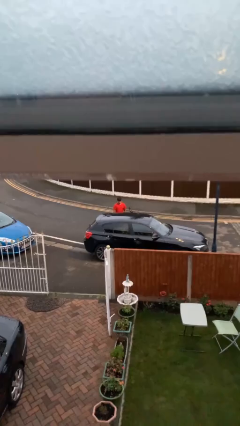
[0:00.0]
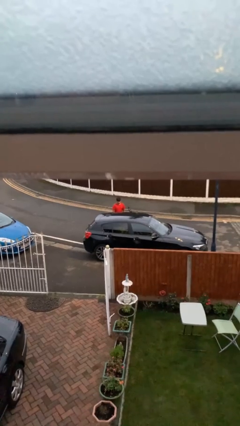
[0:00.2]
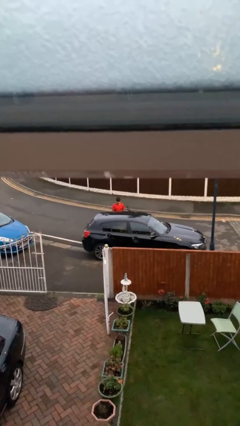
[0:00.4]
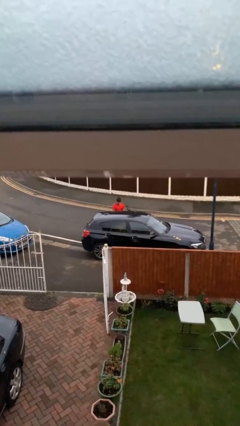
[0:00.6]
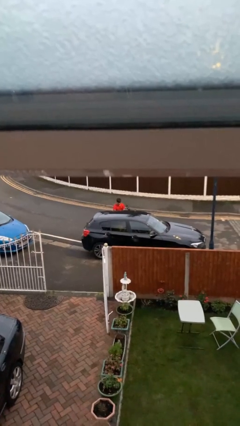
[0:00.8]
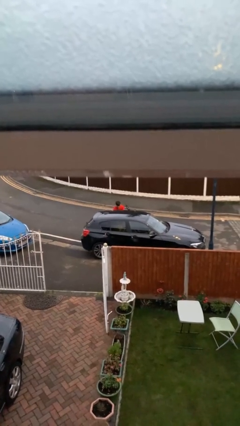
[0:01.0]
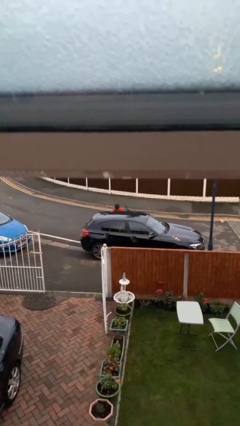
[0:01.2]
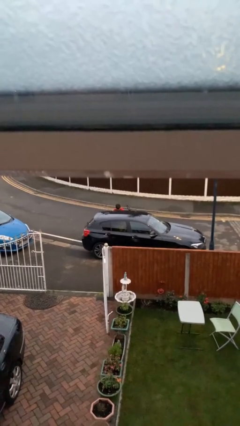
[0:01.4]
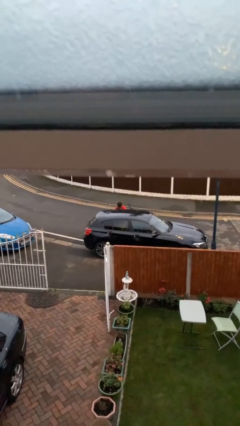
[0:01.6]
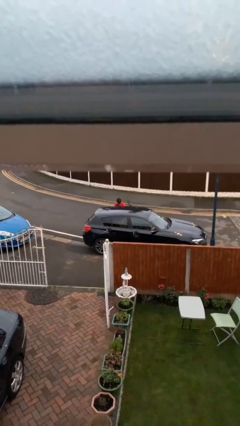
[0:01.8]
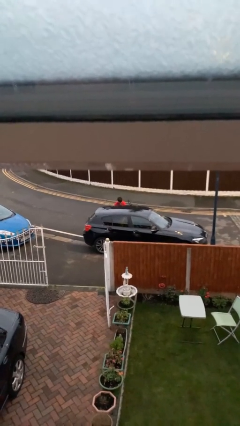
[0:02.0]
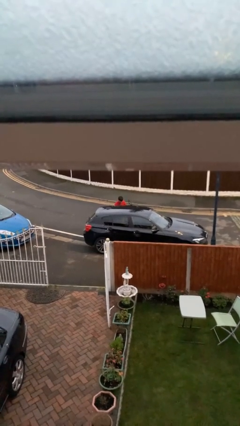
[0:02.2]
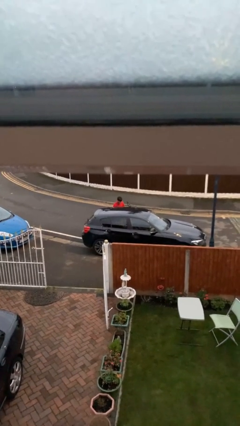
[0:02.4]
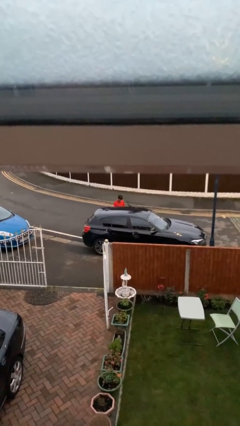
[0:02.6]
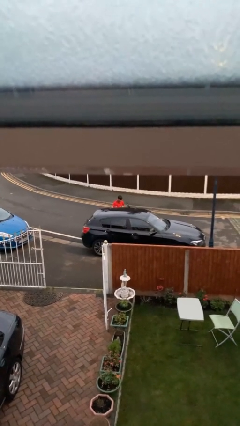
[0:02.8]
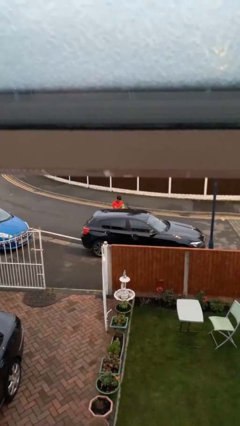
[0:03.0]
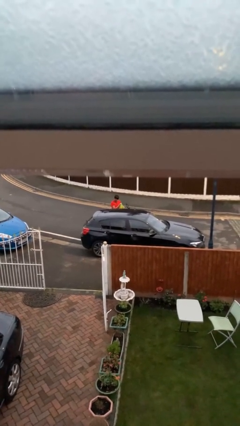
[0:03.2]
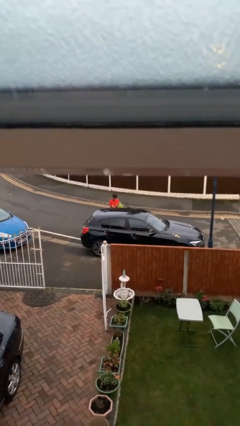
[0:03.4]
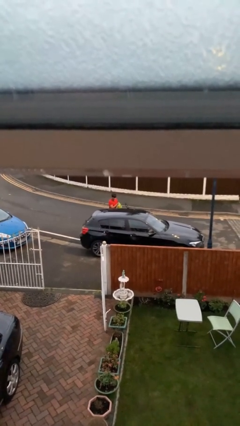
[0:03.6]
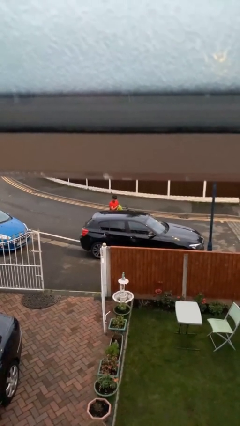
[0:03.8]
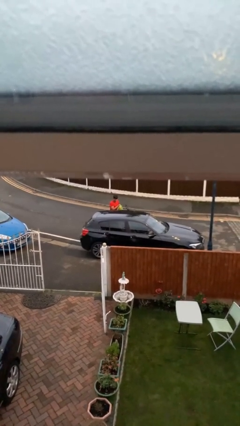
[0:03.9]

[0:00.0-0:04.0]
person unloads car

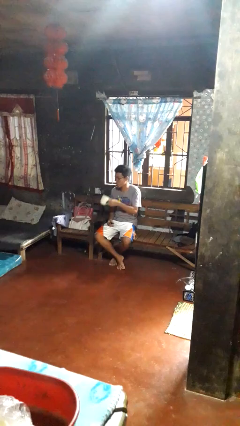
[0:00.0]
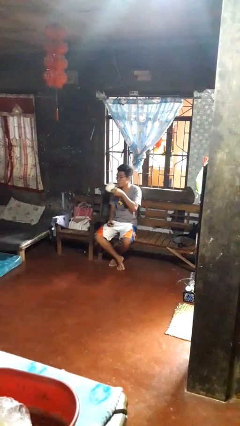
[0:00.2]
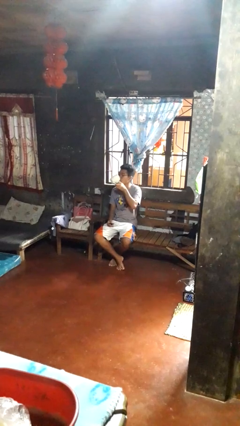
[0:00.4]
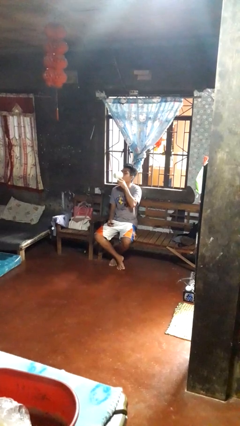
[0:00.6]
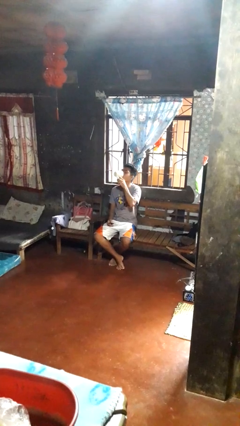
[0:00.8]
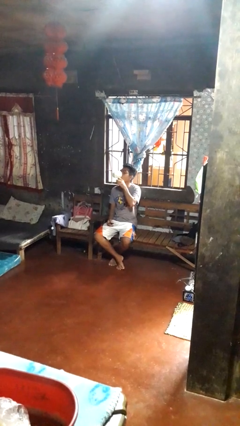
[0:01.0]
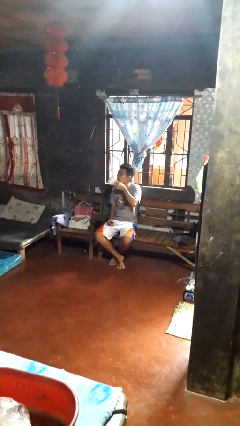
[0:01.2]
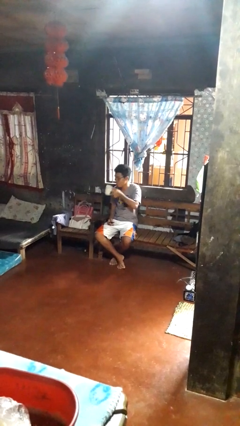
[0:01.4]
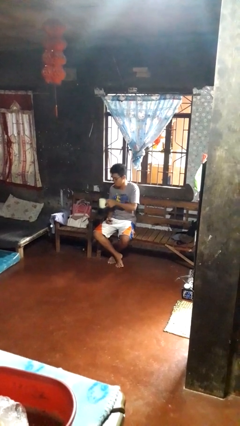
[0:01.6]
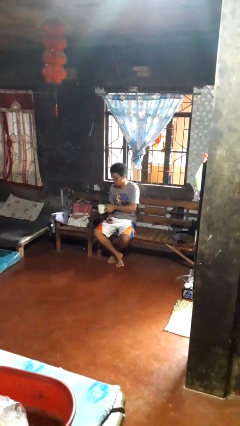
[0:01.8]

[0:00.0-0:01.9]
person drinks from cup

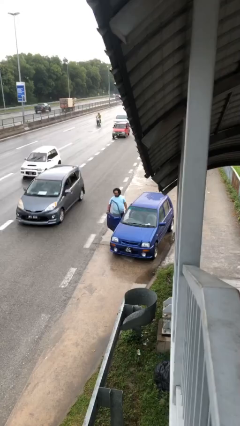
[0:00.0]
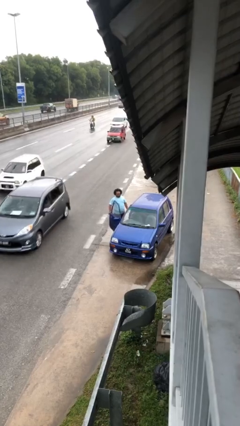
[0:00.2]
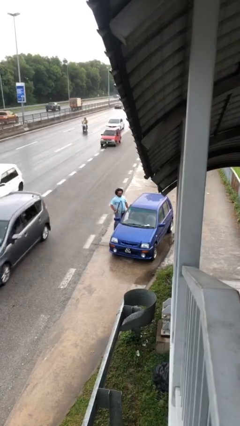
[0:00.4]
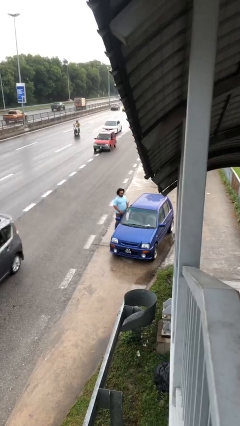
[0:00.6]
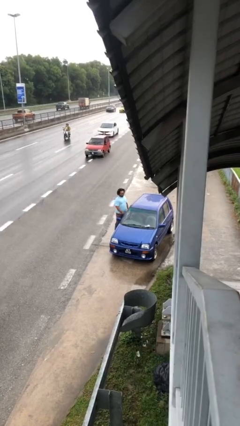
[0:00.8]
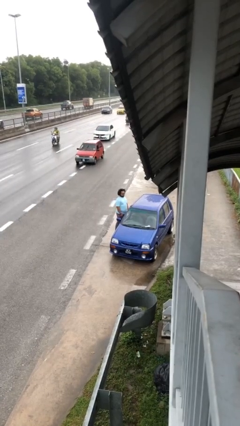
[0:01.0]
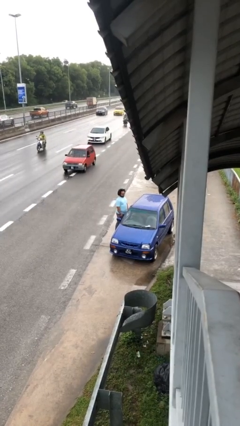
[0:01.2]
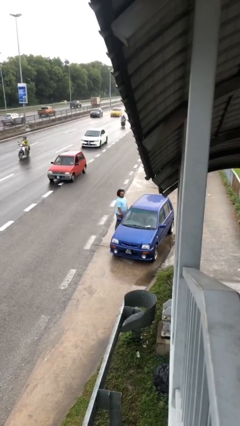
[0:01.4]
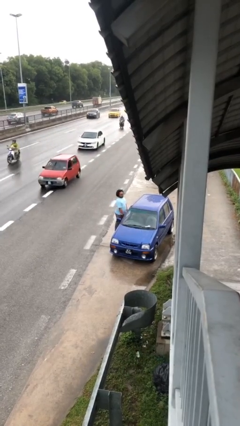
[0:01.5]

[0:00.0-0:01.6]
person closes car door

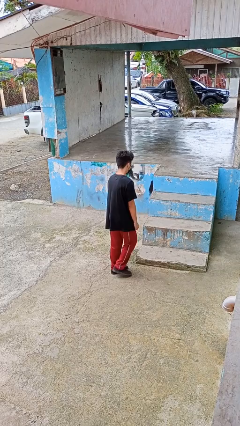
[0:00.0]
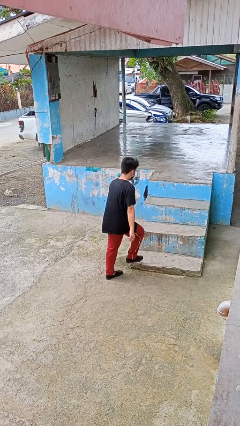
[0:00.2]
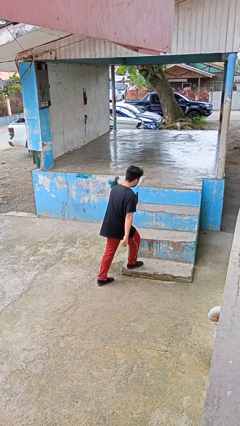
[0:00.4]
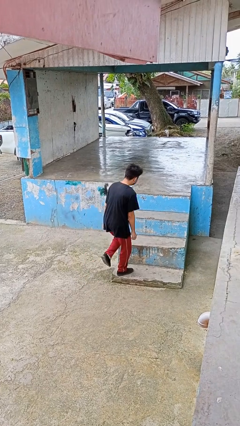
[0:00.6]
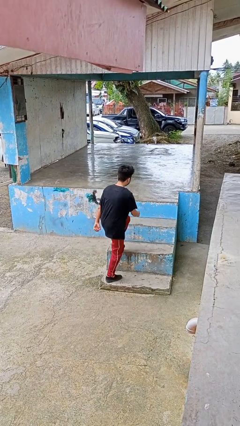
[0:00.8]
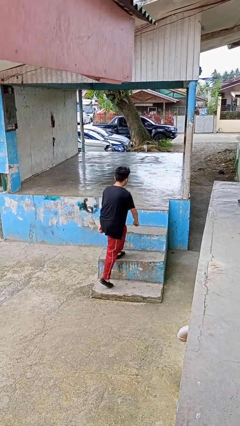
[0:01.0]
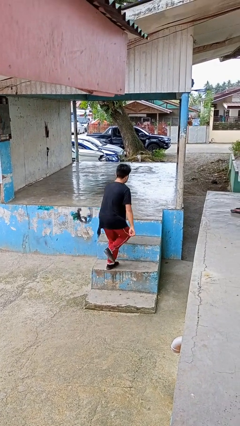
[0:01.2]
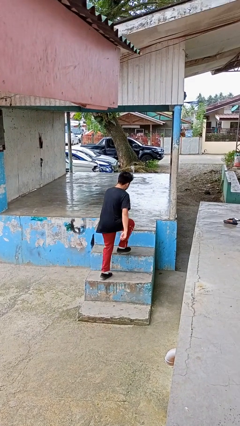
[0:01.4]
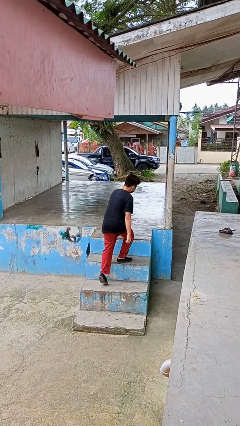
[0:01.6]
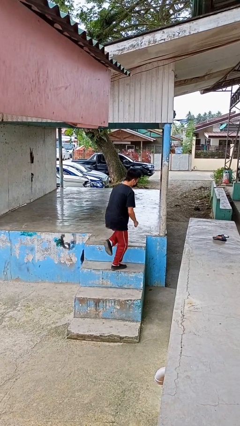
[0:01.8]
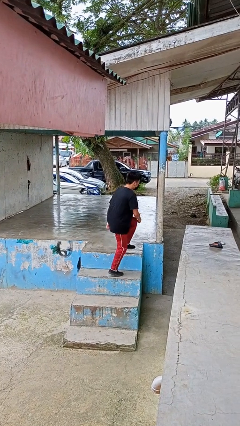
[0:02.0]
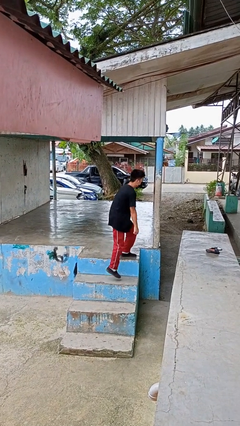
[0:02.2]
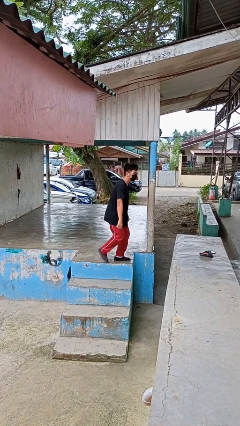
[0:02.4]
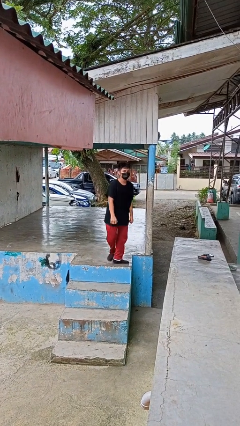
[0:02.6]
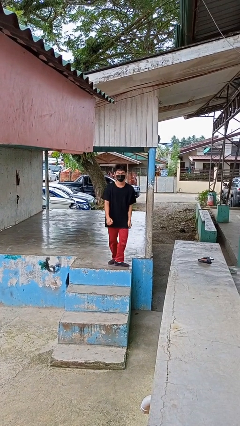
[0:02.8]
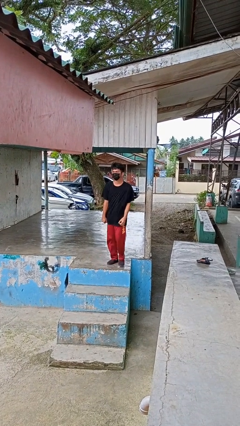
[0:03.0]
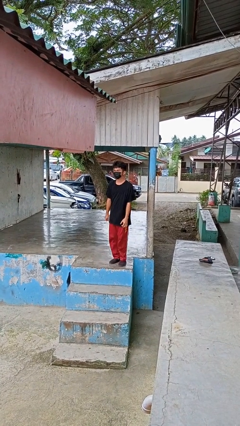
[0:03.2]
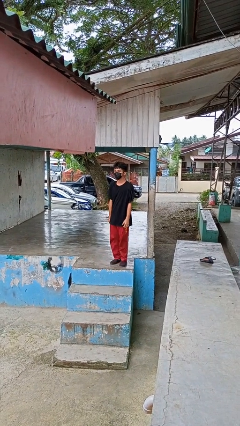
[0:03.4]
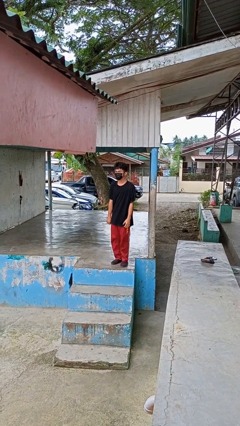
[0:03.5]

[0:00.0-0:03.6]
person climbs up stairs

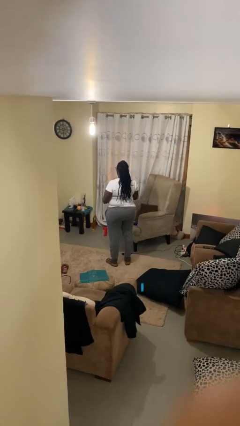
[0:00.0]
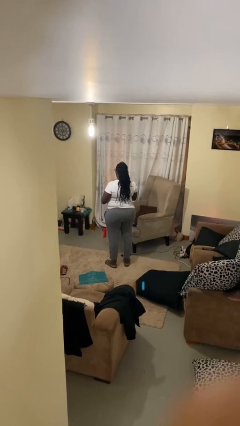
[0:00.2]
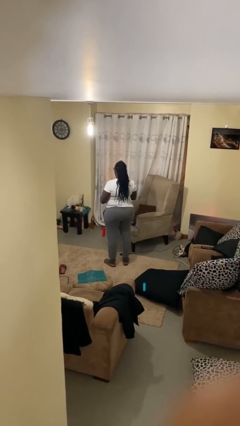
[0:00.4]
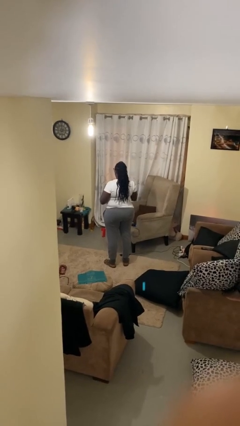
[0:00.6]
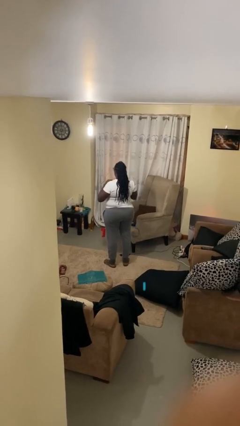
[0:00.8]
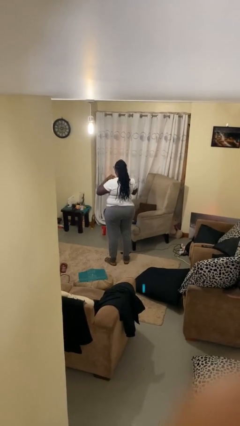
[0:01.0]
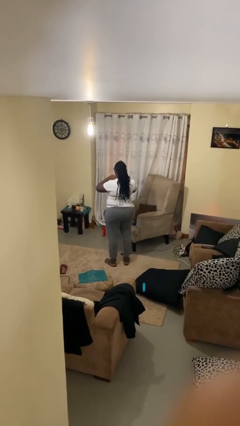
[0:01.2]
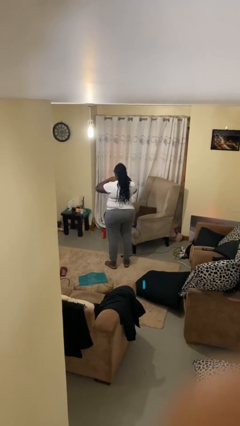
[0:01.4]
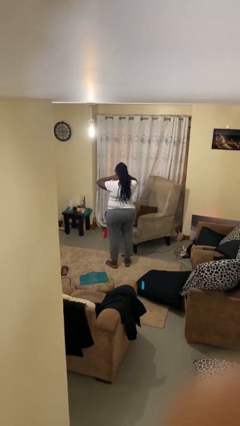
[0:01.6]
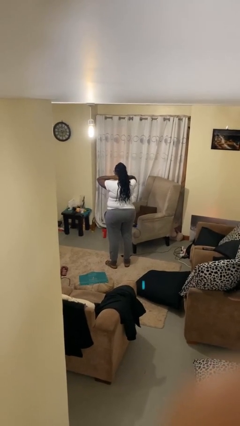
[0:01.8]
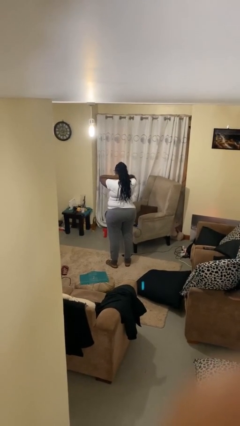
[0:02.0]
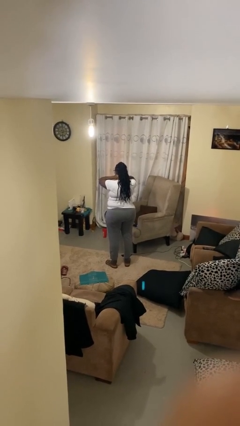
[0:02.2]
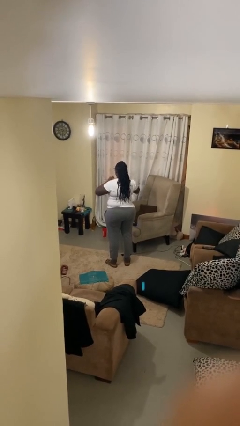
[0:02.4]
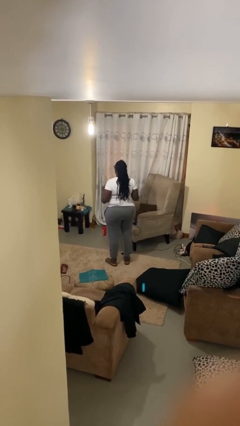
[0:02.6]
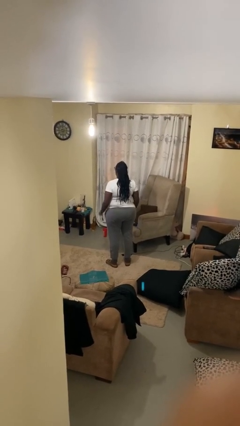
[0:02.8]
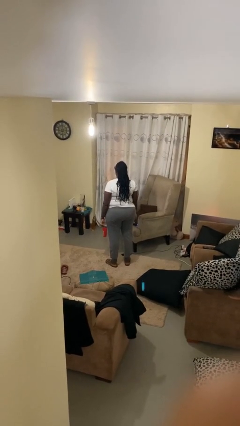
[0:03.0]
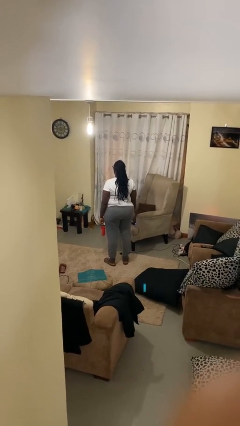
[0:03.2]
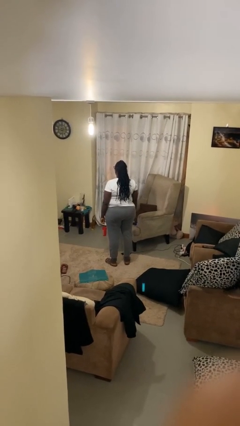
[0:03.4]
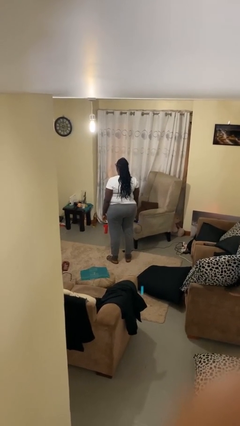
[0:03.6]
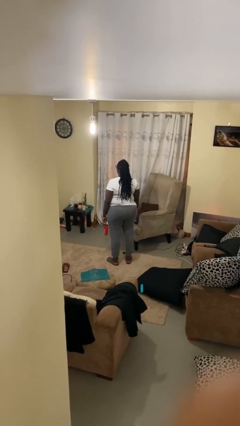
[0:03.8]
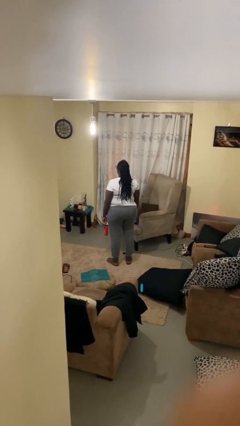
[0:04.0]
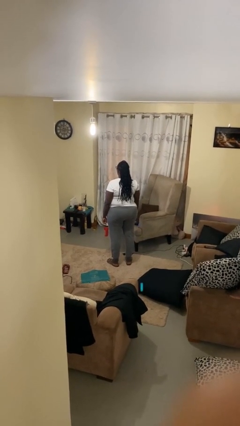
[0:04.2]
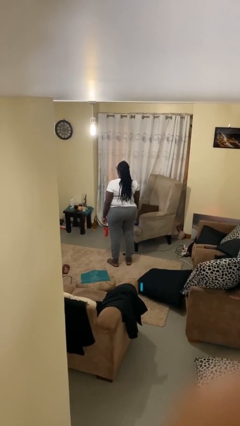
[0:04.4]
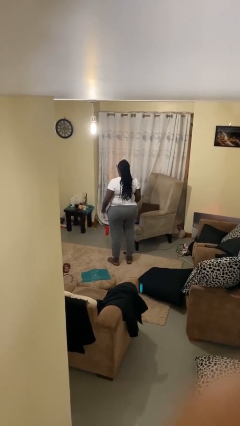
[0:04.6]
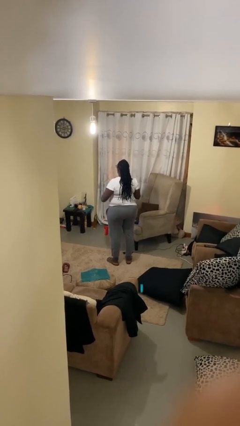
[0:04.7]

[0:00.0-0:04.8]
person puts on necklace

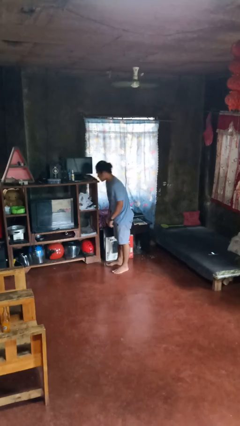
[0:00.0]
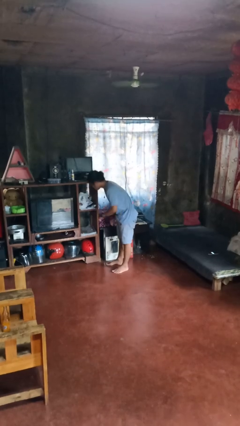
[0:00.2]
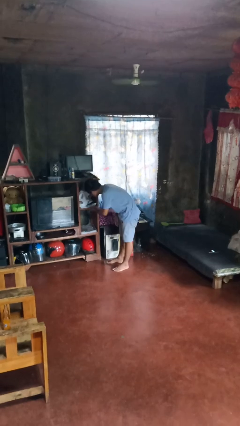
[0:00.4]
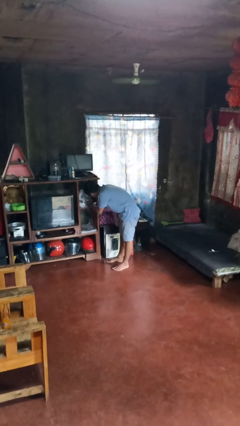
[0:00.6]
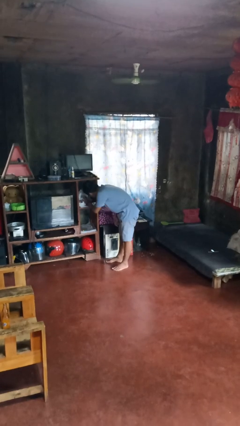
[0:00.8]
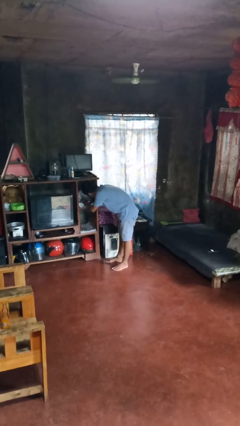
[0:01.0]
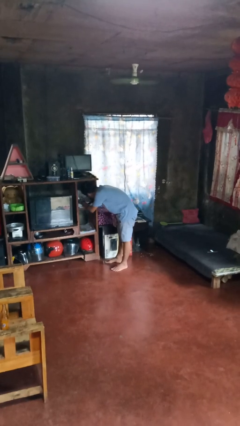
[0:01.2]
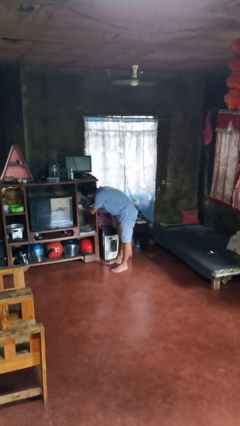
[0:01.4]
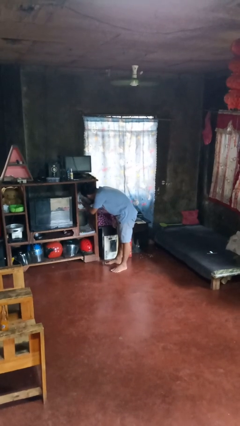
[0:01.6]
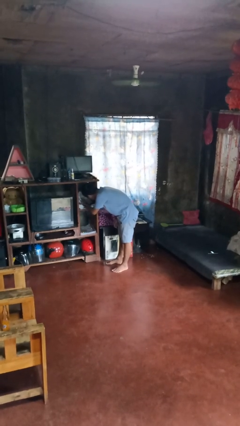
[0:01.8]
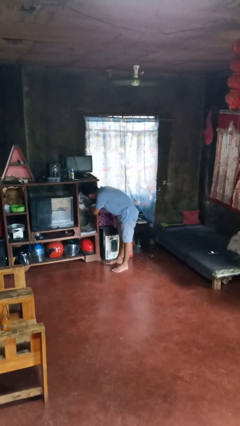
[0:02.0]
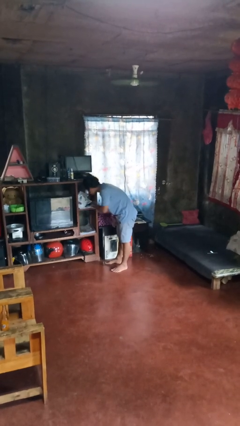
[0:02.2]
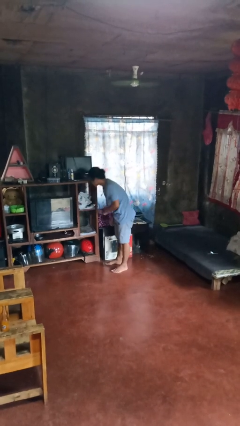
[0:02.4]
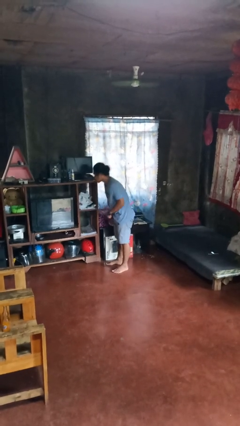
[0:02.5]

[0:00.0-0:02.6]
person searches in cabinet
